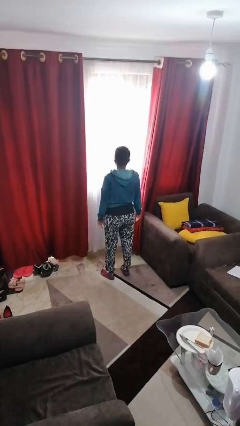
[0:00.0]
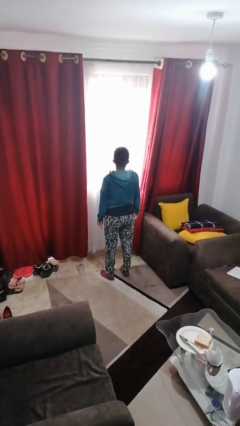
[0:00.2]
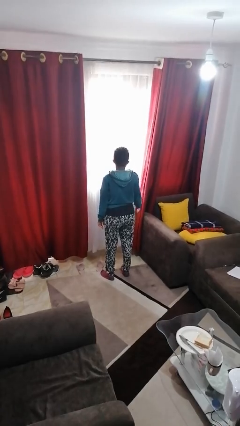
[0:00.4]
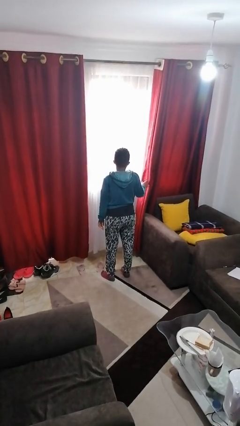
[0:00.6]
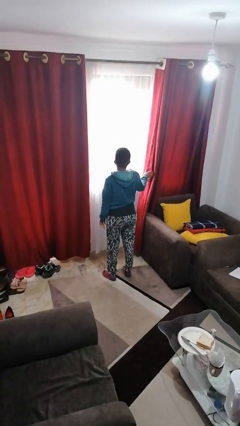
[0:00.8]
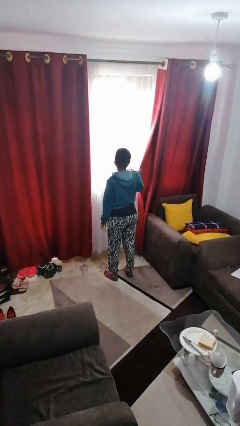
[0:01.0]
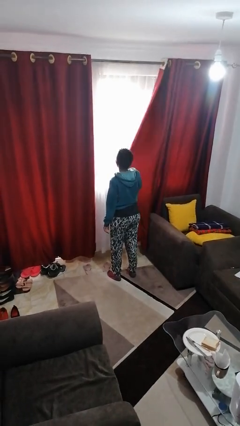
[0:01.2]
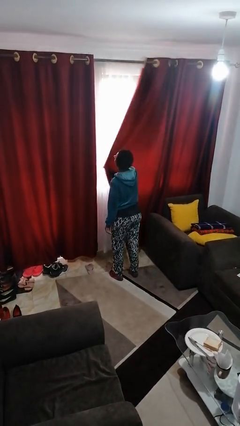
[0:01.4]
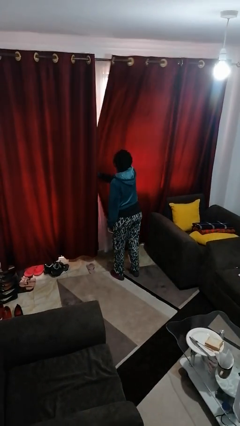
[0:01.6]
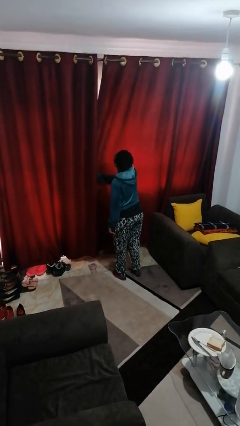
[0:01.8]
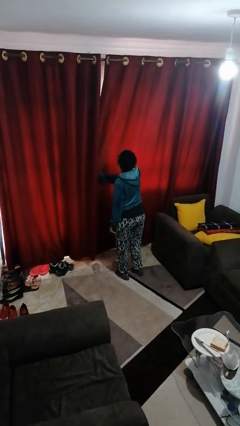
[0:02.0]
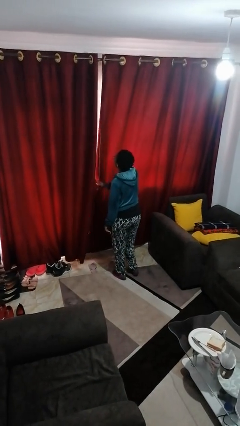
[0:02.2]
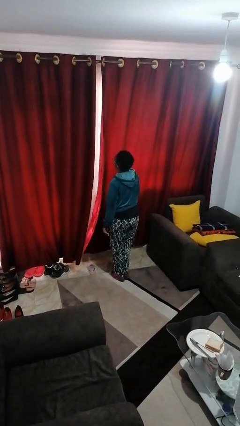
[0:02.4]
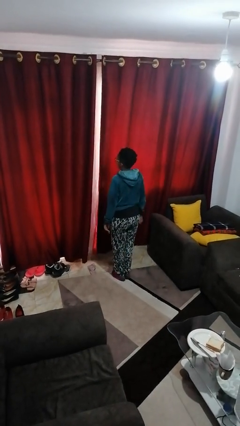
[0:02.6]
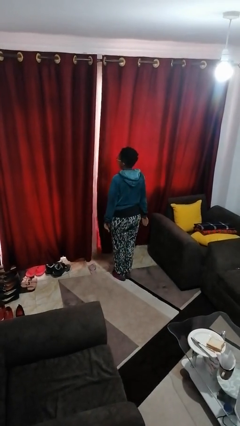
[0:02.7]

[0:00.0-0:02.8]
person closes curtains

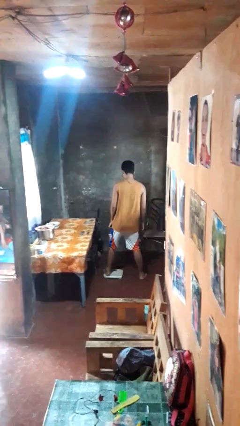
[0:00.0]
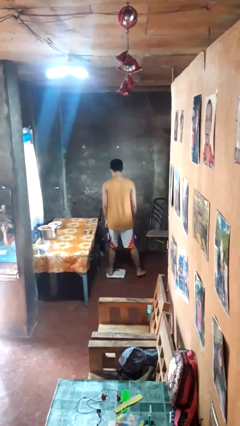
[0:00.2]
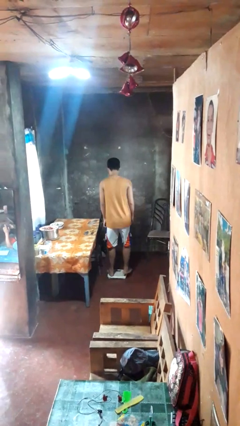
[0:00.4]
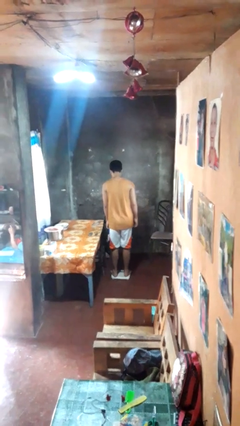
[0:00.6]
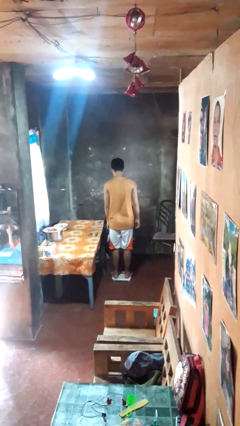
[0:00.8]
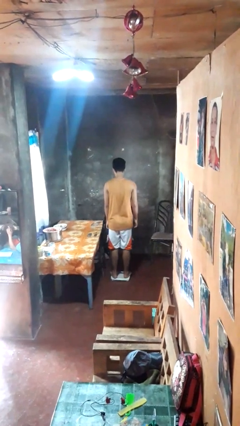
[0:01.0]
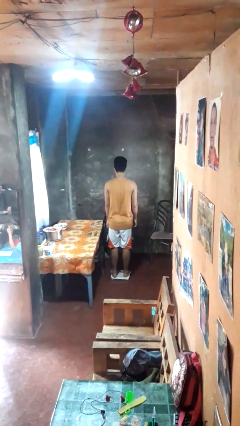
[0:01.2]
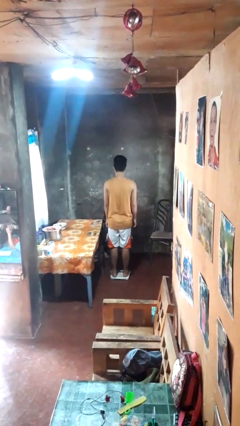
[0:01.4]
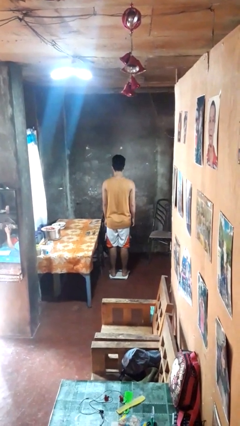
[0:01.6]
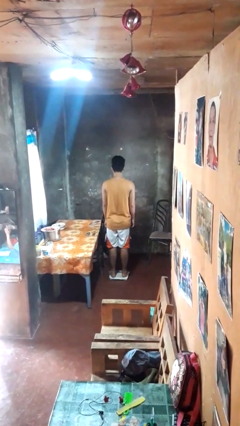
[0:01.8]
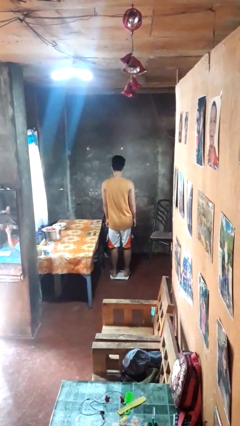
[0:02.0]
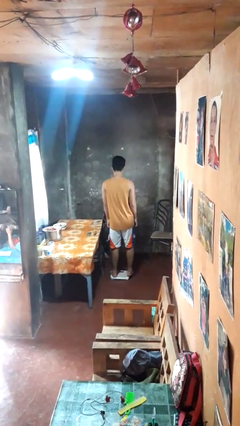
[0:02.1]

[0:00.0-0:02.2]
person uses bodyweight scale

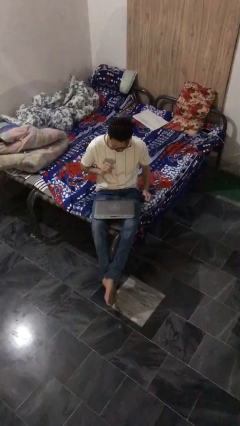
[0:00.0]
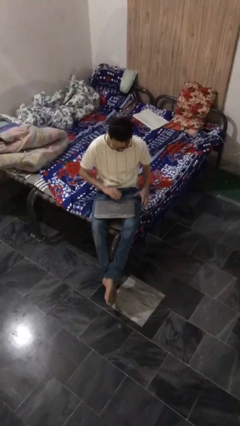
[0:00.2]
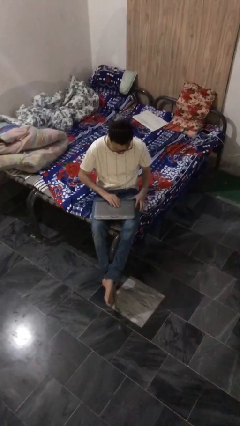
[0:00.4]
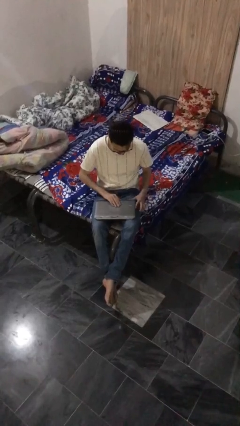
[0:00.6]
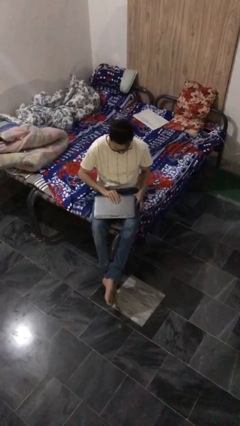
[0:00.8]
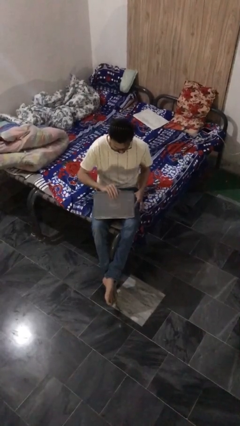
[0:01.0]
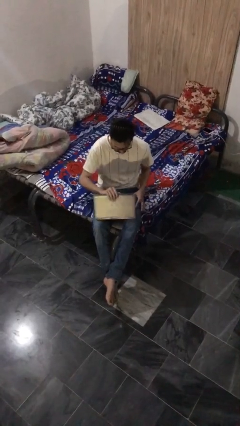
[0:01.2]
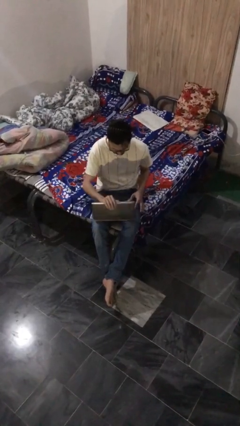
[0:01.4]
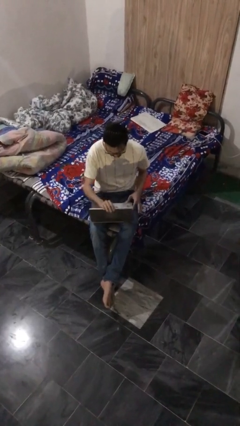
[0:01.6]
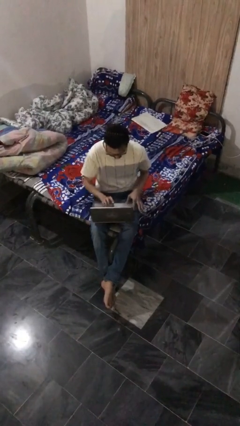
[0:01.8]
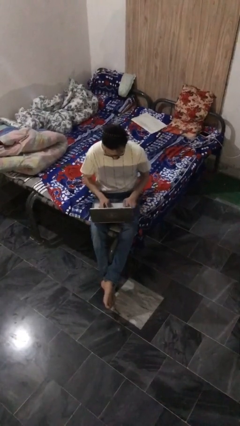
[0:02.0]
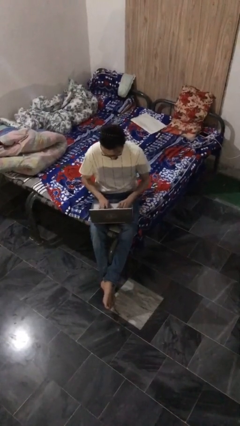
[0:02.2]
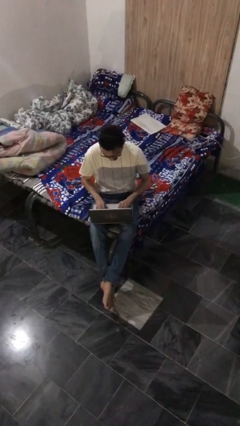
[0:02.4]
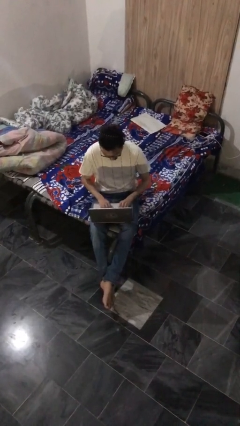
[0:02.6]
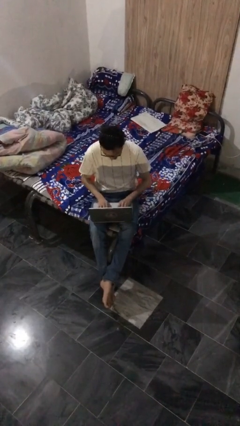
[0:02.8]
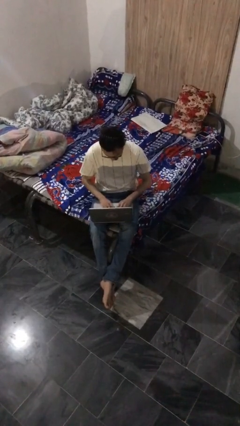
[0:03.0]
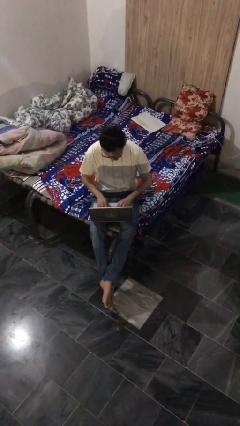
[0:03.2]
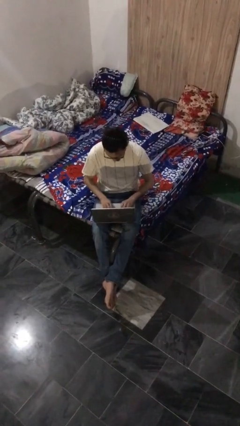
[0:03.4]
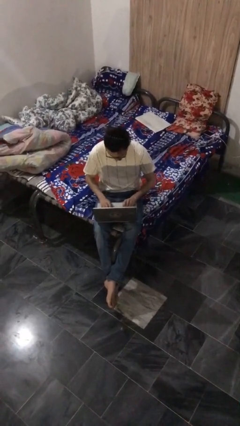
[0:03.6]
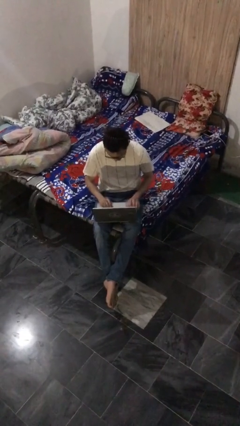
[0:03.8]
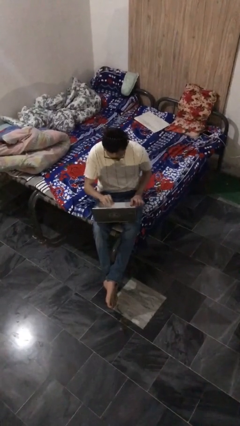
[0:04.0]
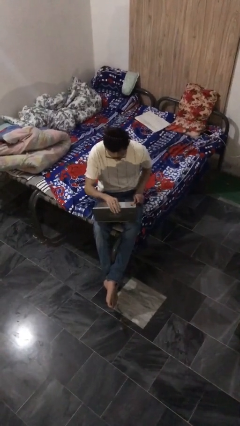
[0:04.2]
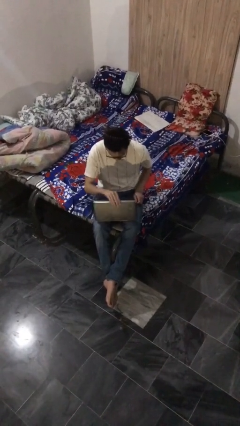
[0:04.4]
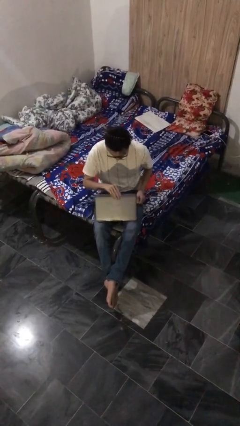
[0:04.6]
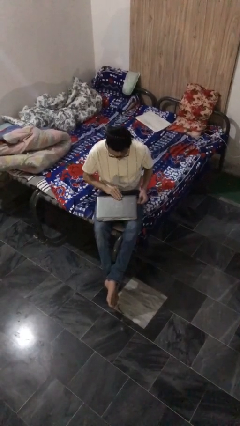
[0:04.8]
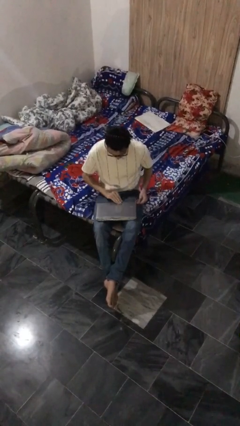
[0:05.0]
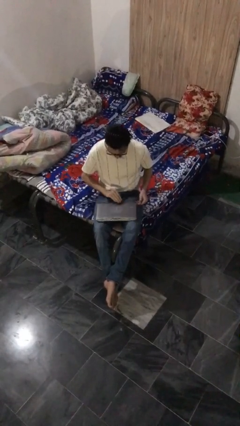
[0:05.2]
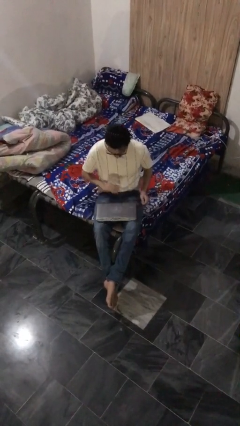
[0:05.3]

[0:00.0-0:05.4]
person interacts with laptop

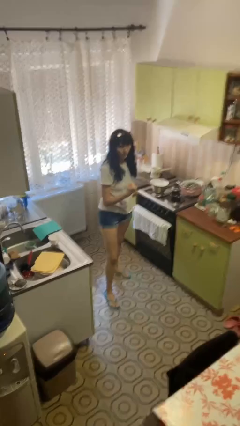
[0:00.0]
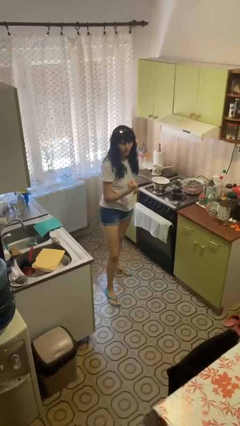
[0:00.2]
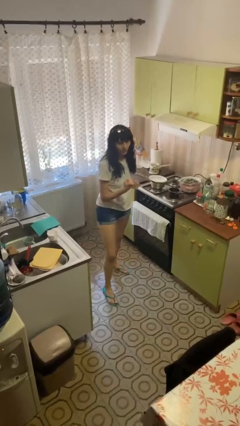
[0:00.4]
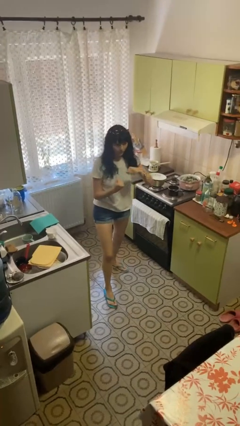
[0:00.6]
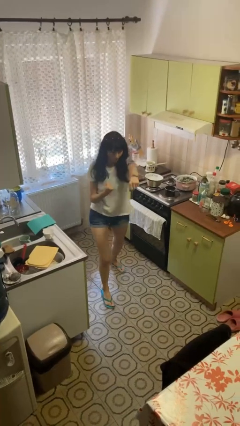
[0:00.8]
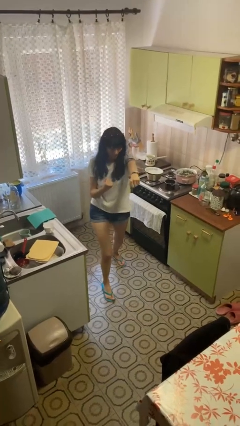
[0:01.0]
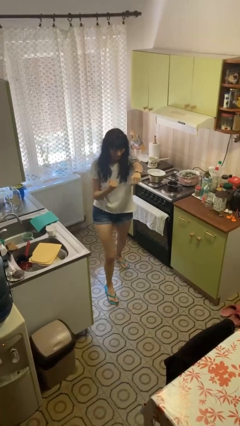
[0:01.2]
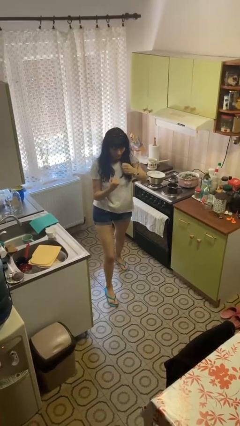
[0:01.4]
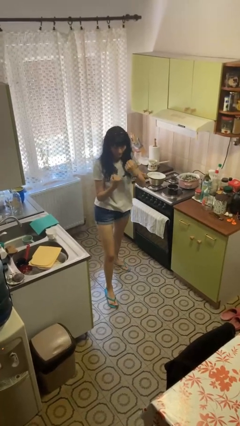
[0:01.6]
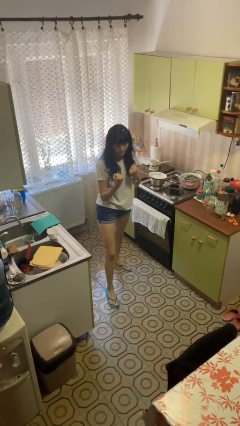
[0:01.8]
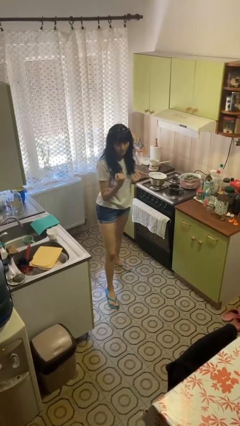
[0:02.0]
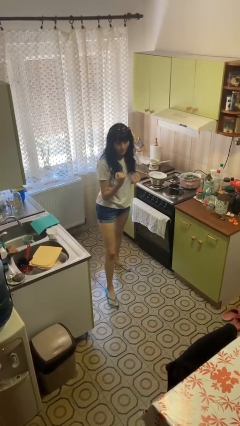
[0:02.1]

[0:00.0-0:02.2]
person punches

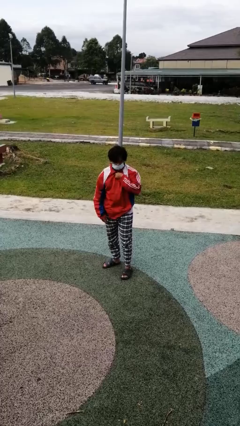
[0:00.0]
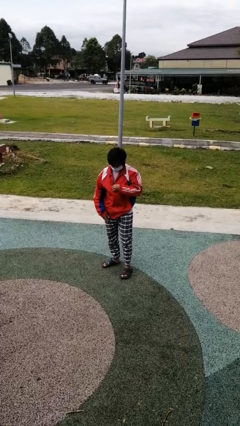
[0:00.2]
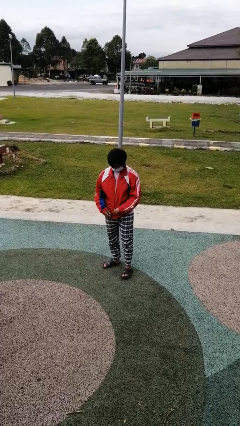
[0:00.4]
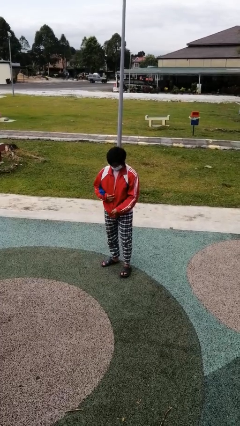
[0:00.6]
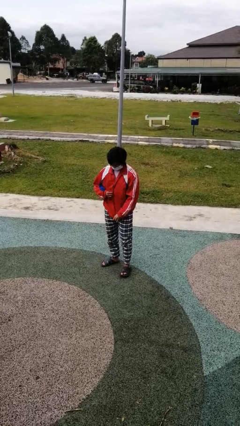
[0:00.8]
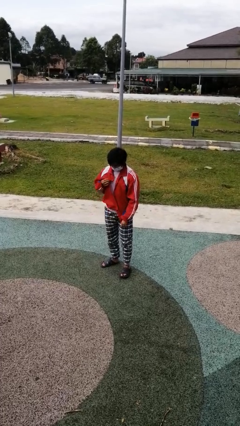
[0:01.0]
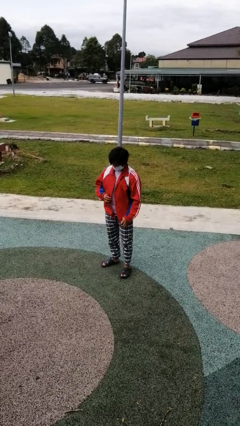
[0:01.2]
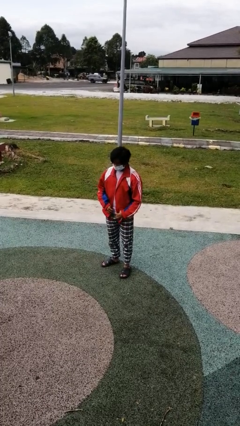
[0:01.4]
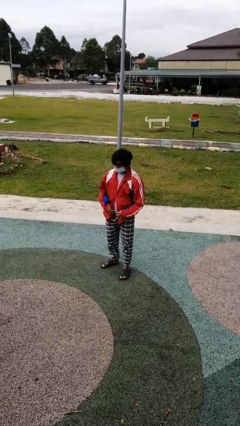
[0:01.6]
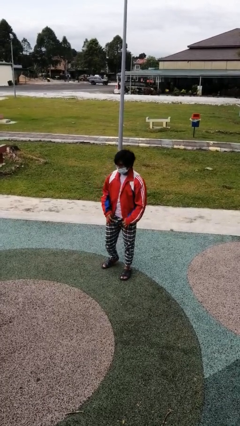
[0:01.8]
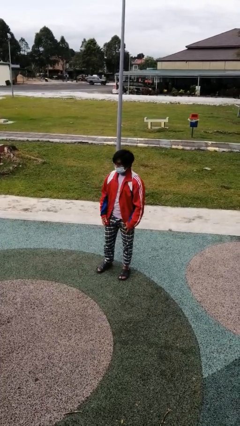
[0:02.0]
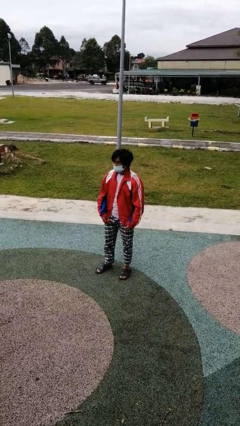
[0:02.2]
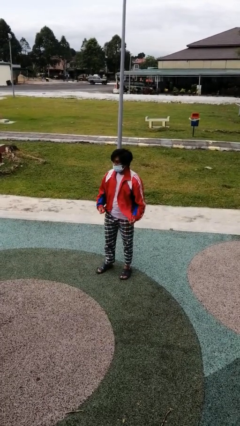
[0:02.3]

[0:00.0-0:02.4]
person unzips jacket

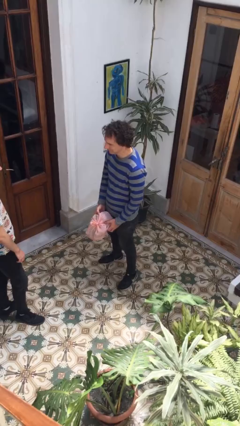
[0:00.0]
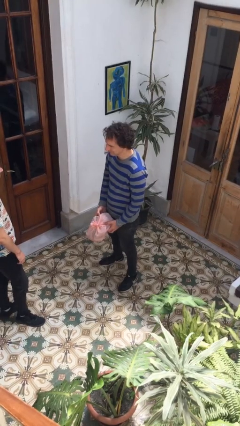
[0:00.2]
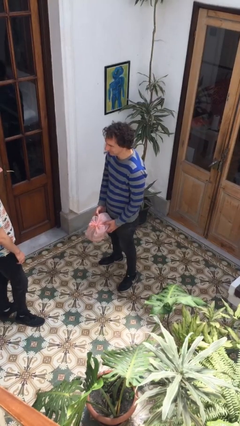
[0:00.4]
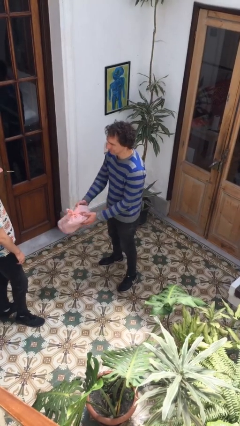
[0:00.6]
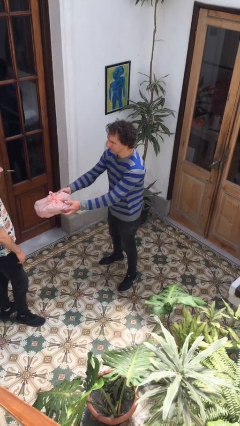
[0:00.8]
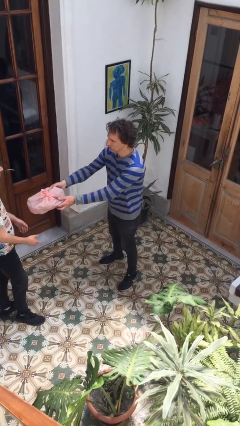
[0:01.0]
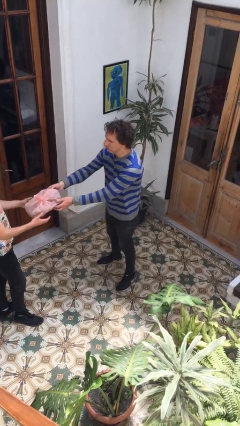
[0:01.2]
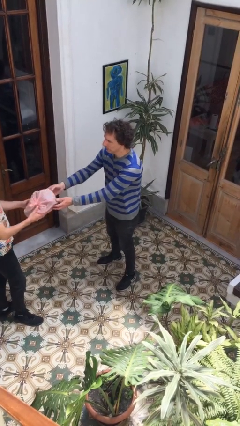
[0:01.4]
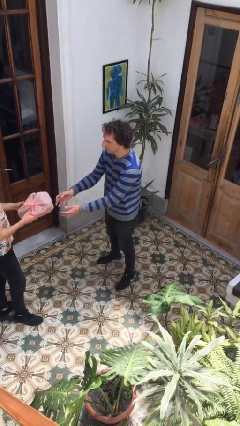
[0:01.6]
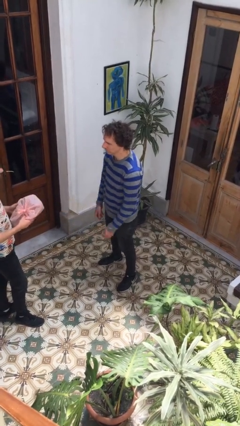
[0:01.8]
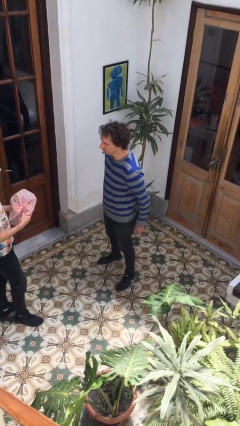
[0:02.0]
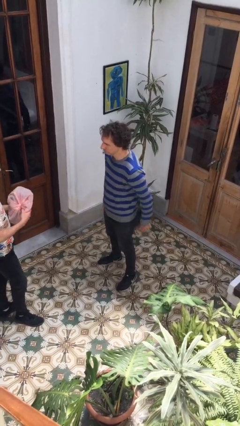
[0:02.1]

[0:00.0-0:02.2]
person transfers object to person
